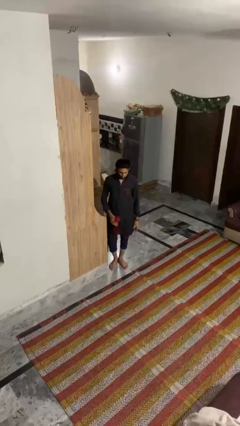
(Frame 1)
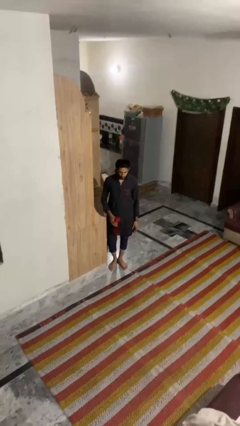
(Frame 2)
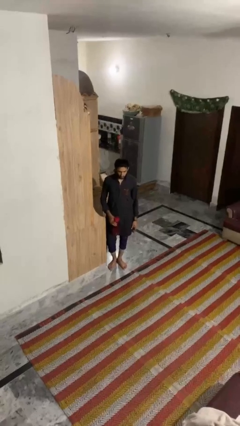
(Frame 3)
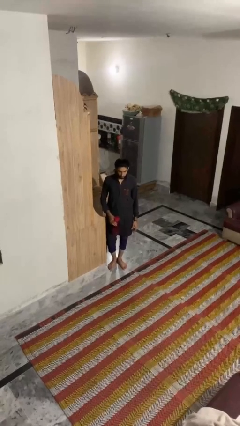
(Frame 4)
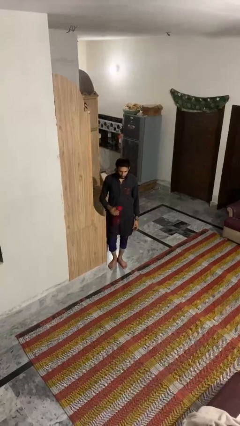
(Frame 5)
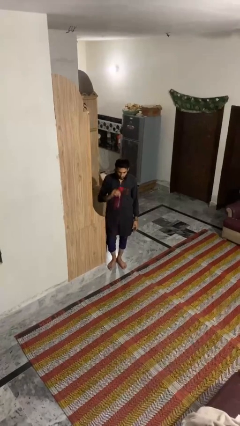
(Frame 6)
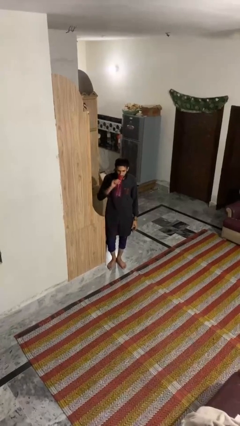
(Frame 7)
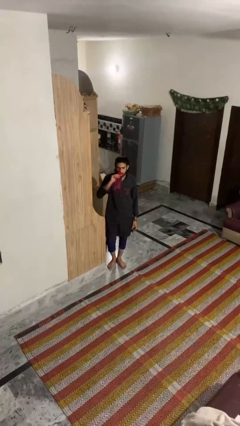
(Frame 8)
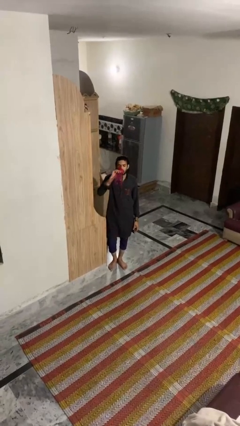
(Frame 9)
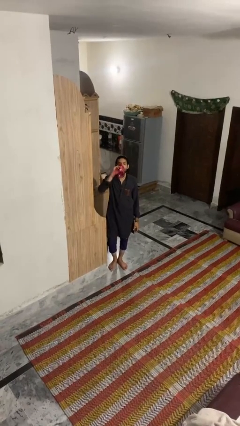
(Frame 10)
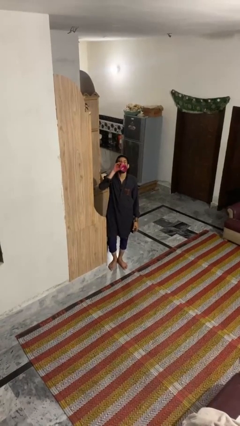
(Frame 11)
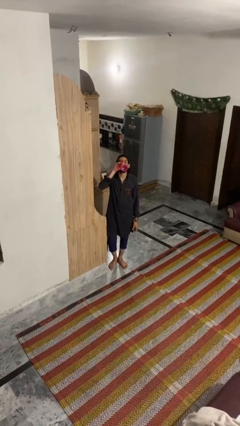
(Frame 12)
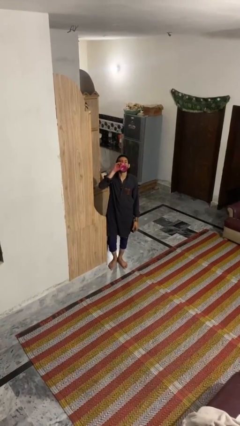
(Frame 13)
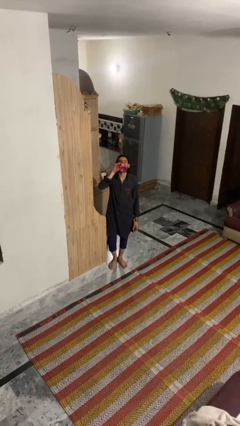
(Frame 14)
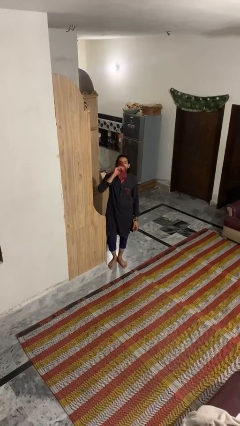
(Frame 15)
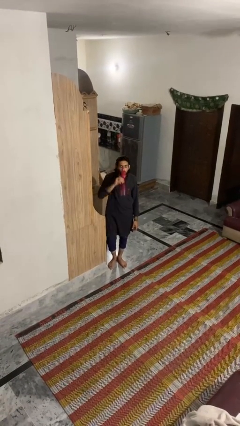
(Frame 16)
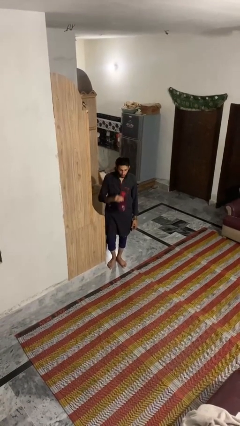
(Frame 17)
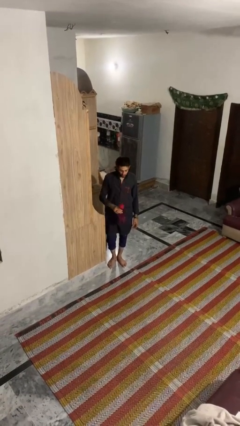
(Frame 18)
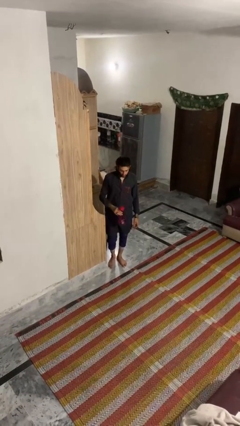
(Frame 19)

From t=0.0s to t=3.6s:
person drinks from bottle

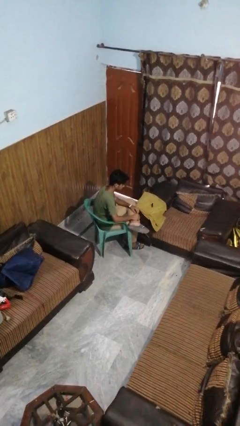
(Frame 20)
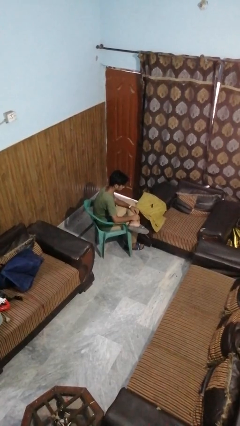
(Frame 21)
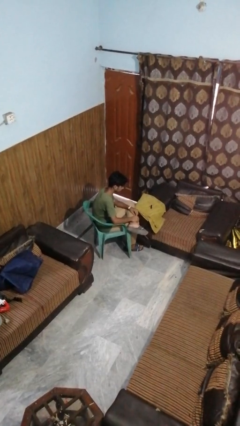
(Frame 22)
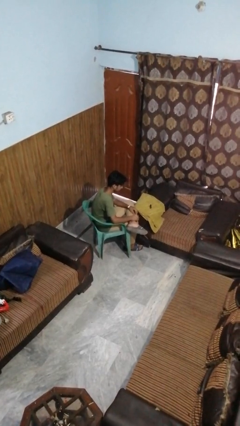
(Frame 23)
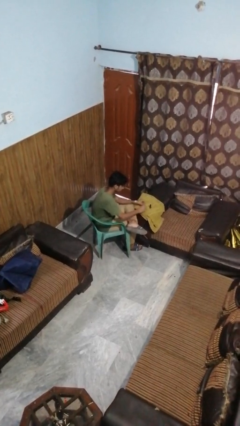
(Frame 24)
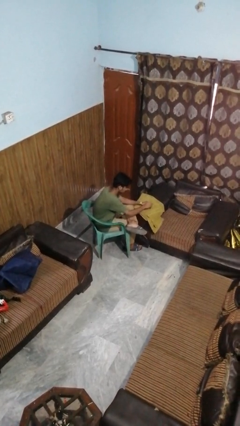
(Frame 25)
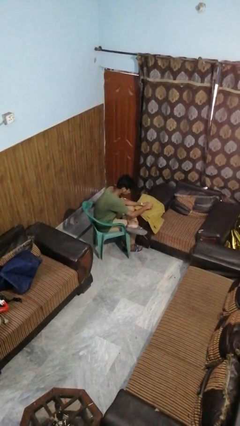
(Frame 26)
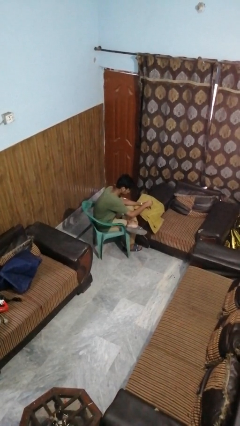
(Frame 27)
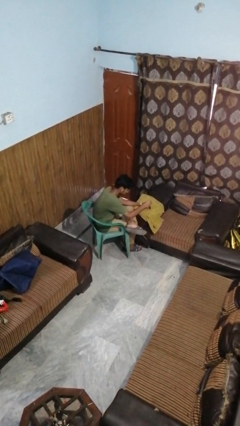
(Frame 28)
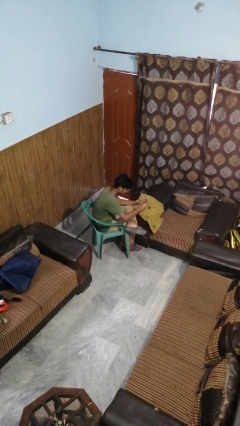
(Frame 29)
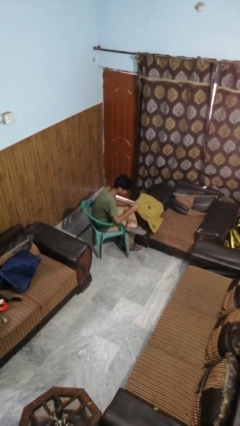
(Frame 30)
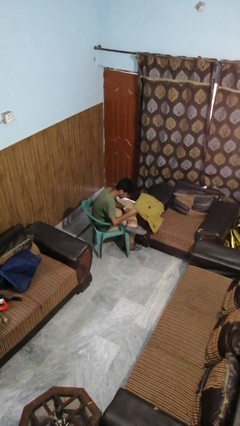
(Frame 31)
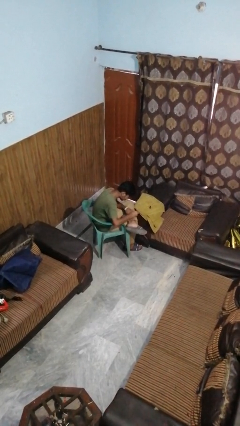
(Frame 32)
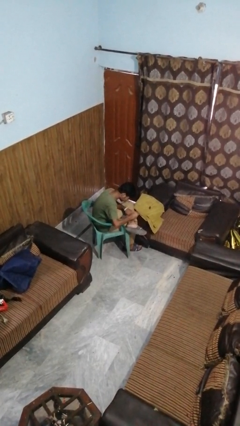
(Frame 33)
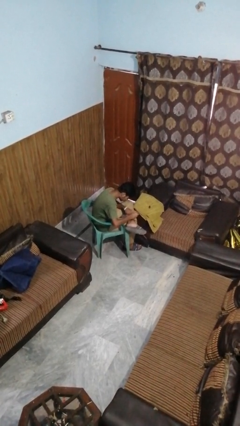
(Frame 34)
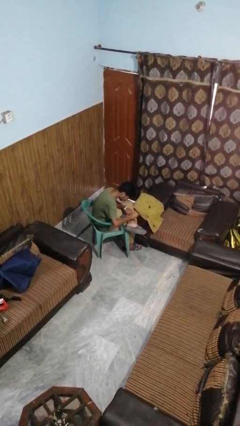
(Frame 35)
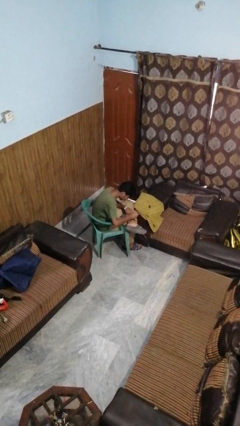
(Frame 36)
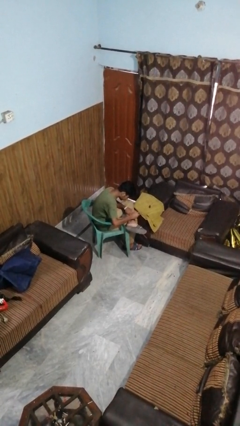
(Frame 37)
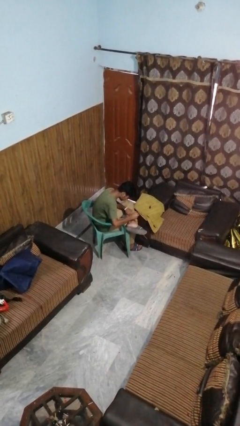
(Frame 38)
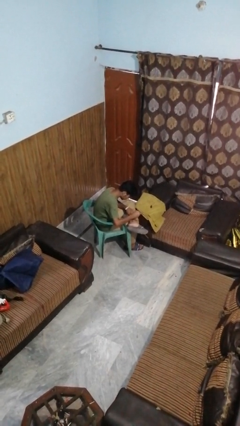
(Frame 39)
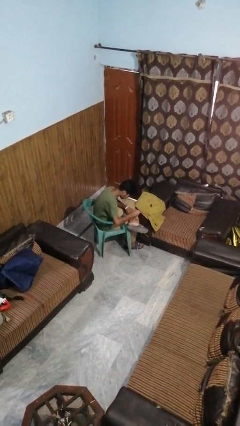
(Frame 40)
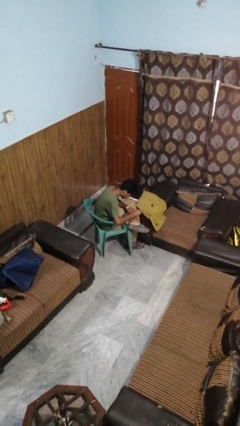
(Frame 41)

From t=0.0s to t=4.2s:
person paints fingernails

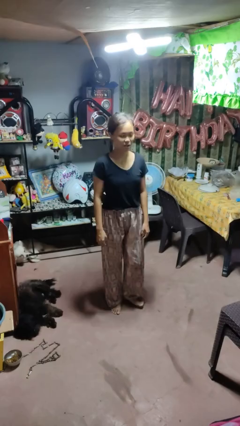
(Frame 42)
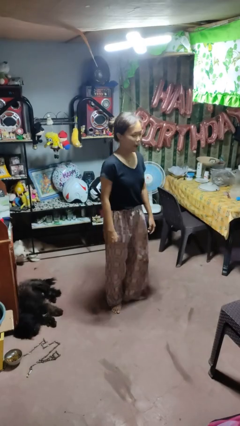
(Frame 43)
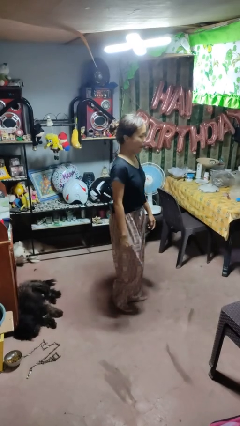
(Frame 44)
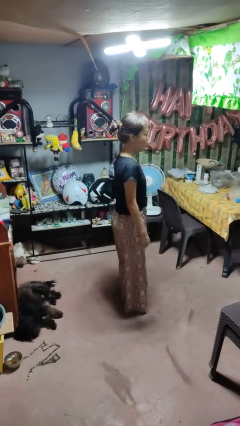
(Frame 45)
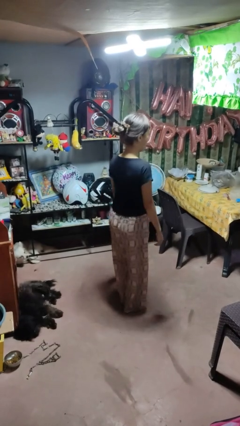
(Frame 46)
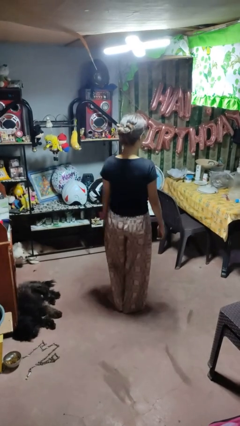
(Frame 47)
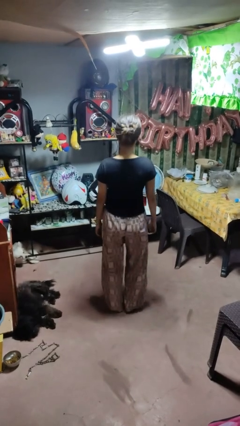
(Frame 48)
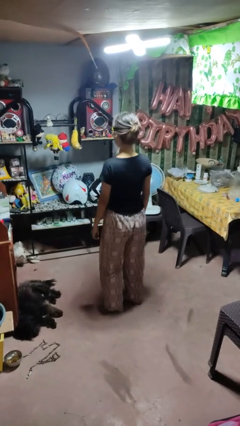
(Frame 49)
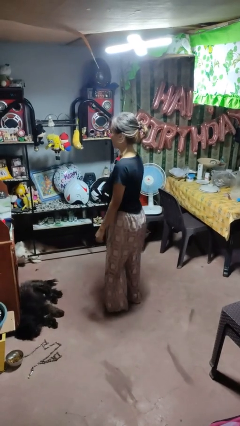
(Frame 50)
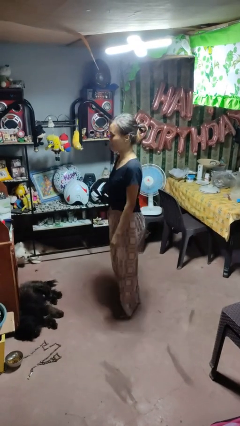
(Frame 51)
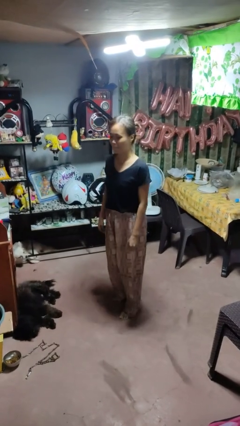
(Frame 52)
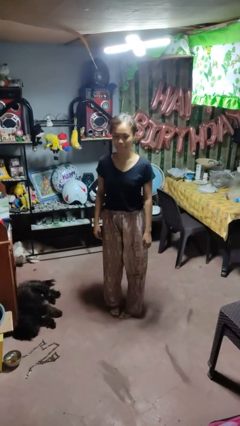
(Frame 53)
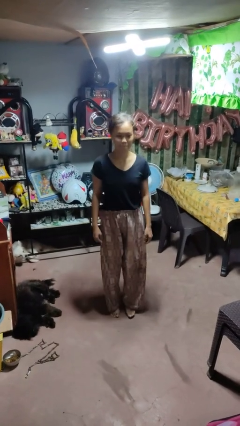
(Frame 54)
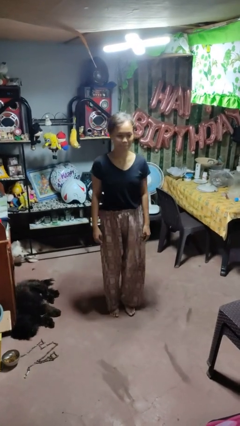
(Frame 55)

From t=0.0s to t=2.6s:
person twirls

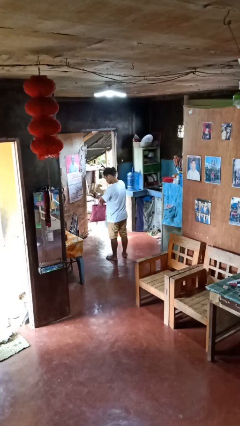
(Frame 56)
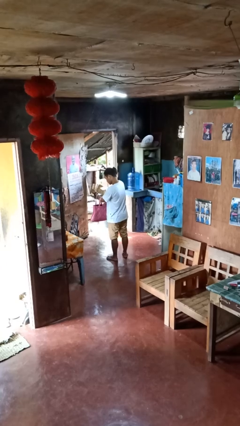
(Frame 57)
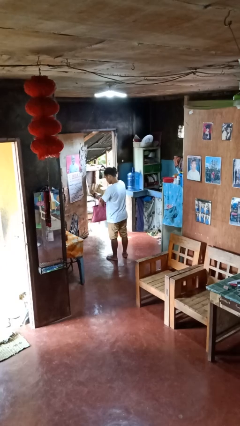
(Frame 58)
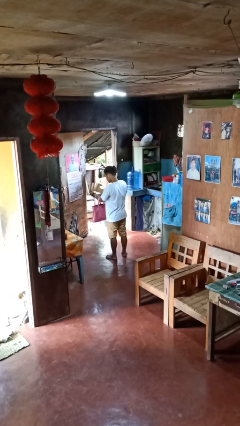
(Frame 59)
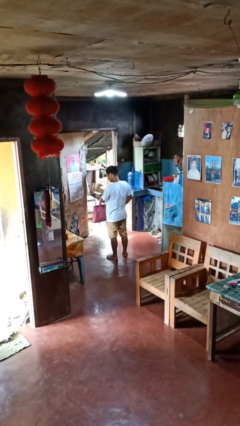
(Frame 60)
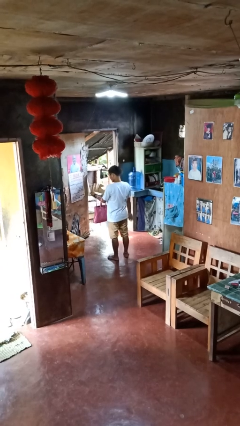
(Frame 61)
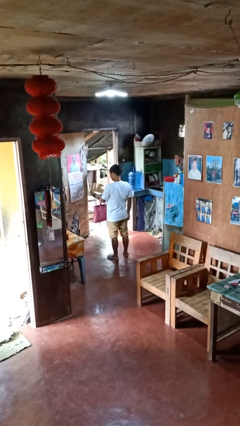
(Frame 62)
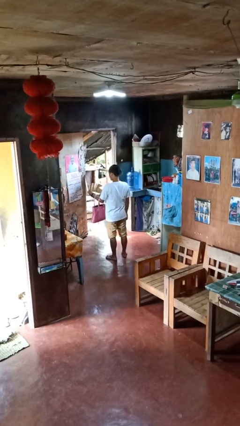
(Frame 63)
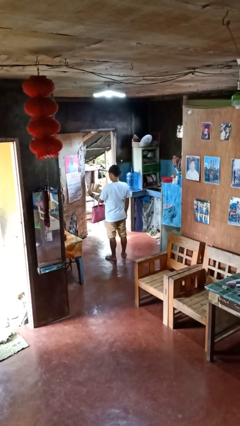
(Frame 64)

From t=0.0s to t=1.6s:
person puts object into purse

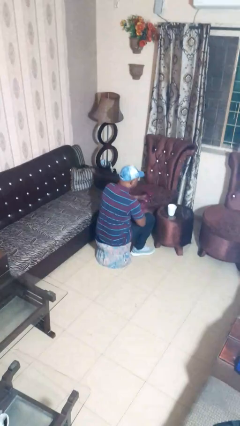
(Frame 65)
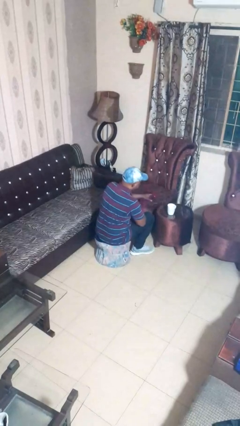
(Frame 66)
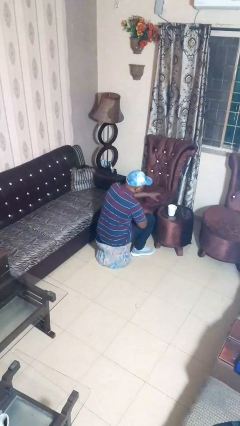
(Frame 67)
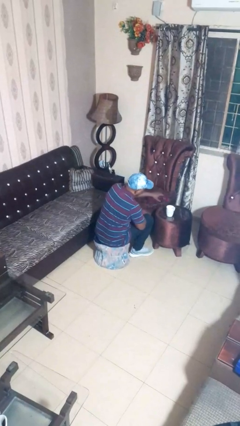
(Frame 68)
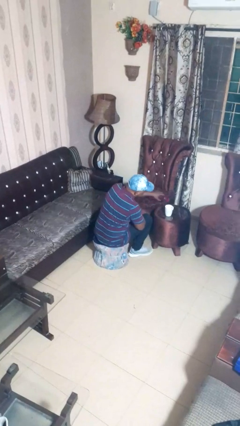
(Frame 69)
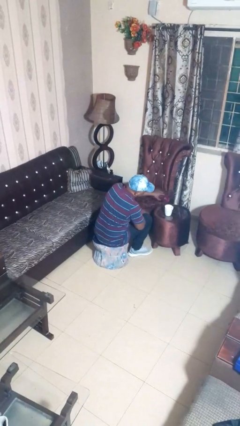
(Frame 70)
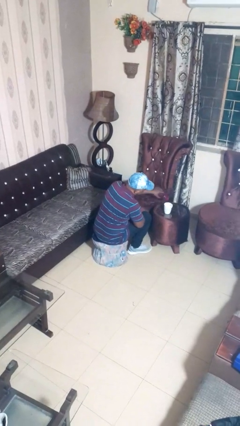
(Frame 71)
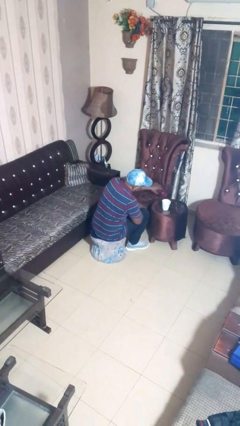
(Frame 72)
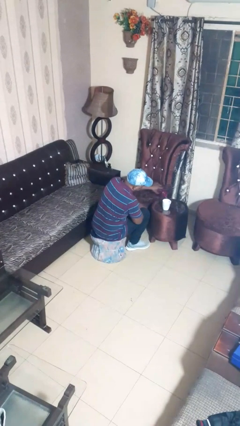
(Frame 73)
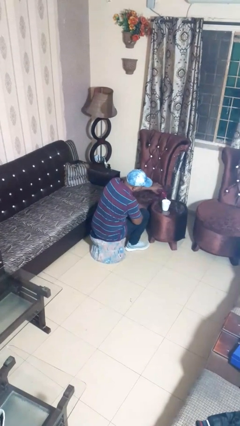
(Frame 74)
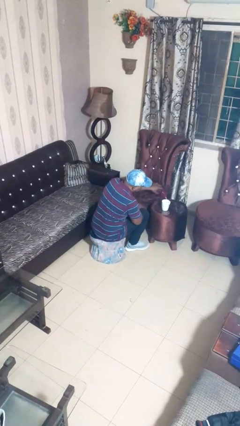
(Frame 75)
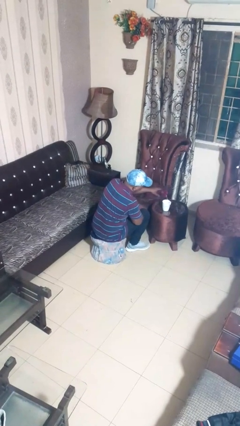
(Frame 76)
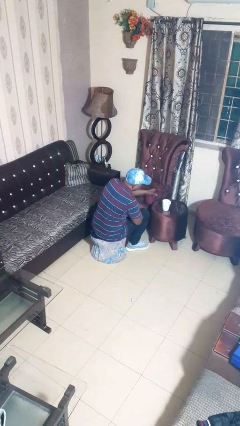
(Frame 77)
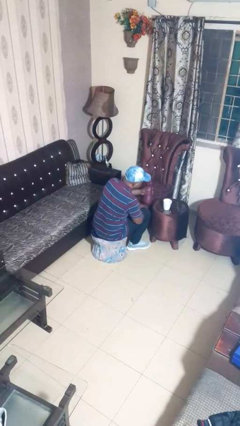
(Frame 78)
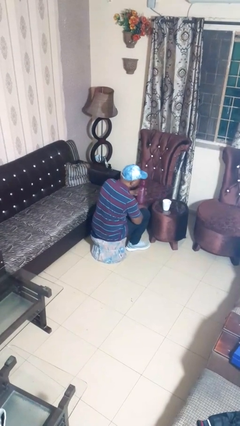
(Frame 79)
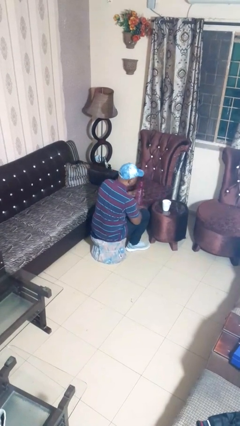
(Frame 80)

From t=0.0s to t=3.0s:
person pours liquid into cup

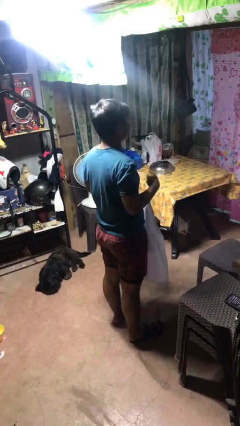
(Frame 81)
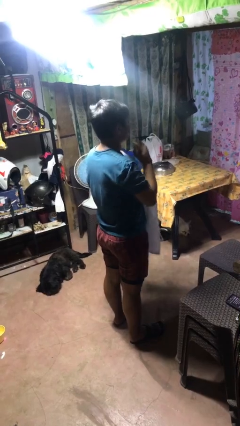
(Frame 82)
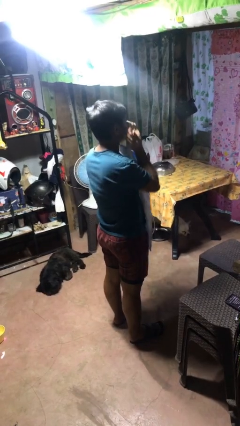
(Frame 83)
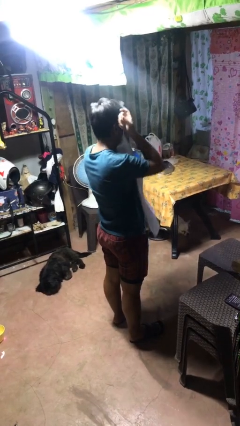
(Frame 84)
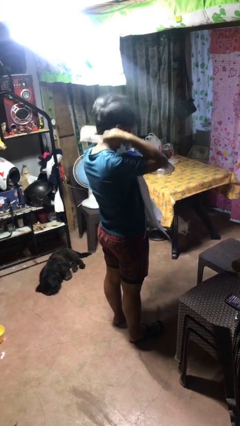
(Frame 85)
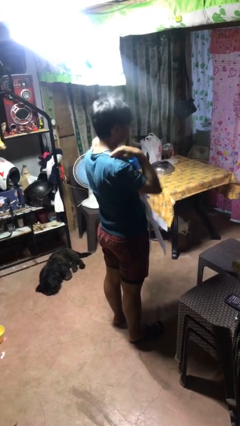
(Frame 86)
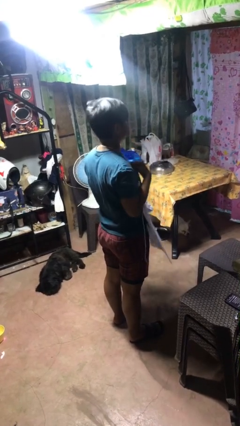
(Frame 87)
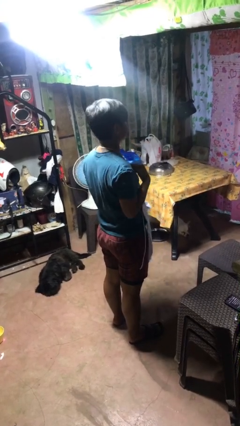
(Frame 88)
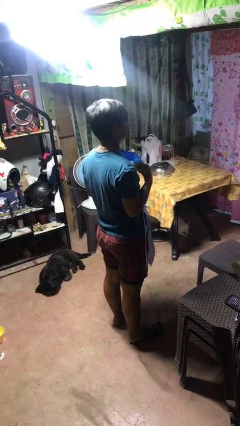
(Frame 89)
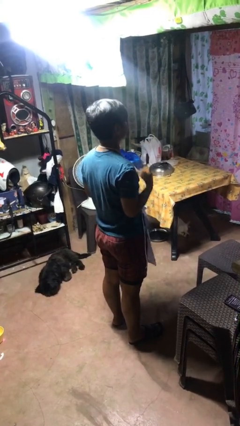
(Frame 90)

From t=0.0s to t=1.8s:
person puts on apron

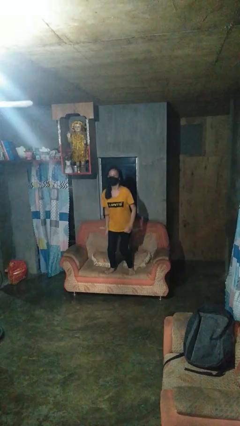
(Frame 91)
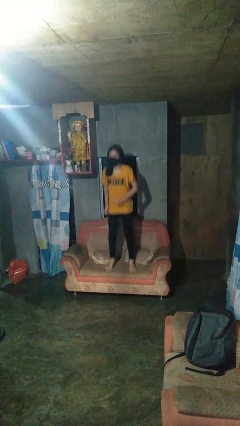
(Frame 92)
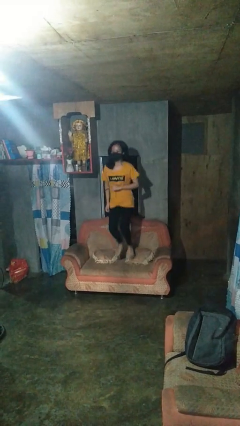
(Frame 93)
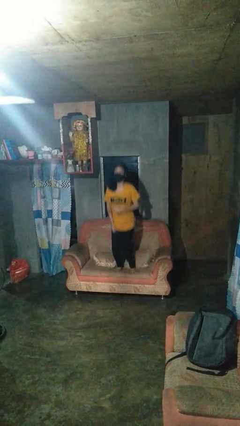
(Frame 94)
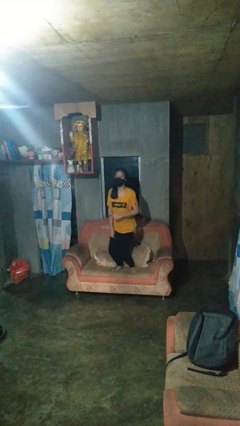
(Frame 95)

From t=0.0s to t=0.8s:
person jumps on couch
